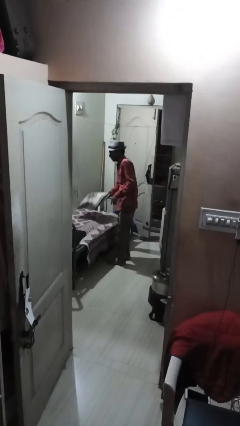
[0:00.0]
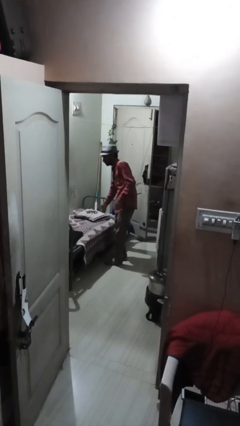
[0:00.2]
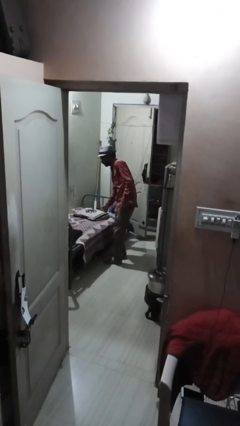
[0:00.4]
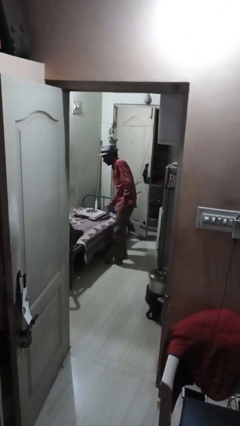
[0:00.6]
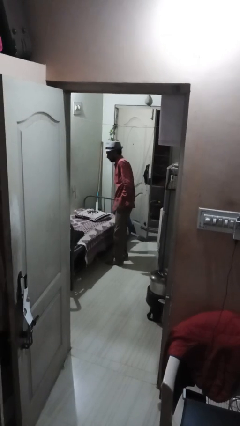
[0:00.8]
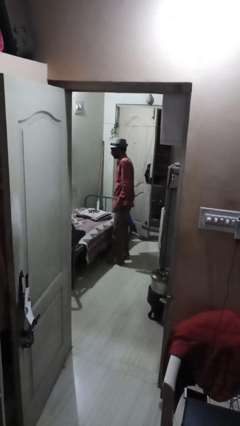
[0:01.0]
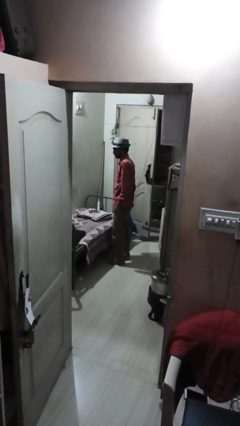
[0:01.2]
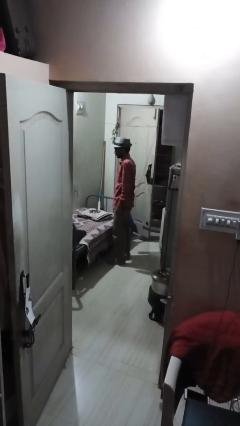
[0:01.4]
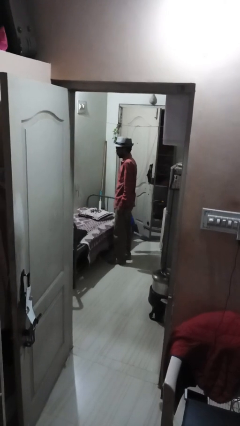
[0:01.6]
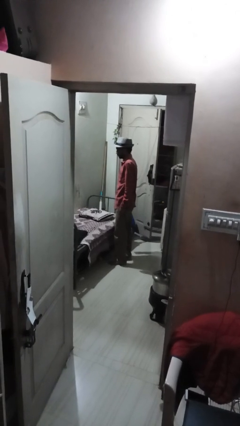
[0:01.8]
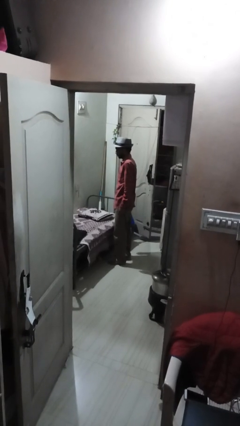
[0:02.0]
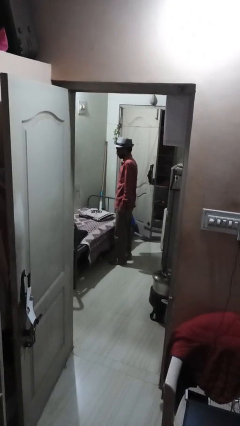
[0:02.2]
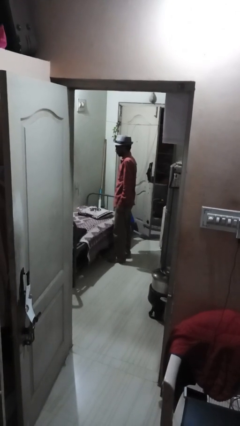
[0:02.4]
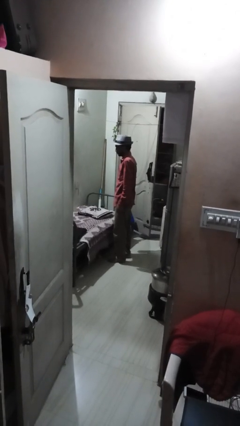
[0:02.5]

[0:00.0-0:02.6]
person puts down object on bed

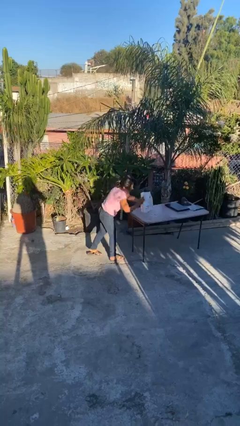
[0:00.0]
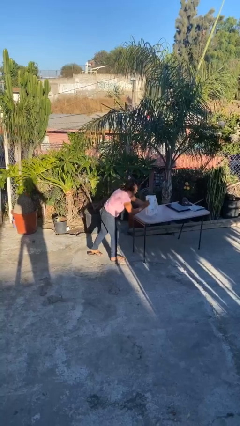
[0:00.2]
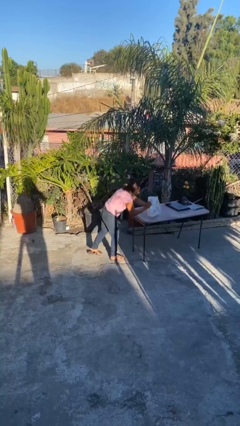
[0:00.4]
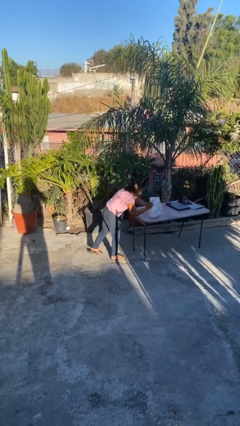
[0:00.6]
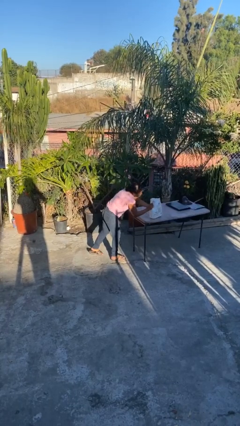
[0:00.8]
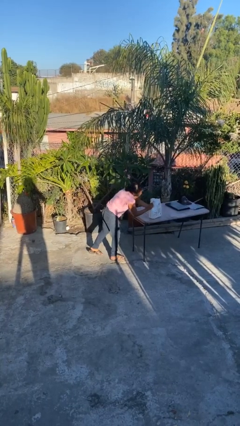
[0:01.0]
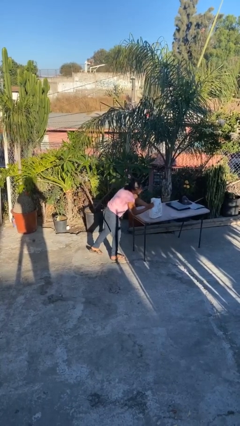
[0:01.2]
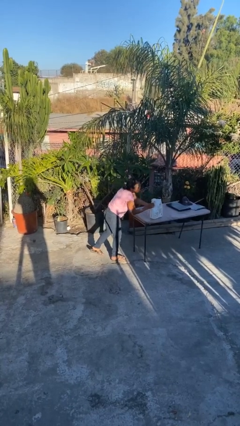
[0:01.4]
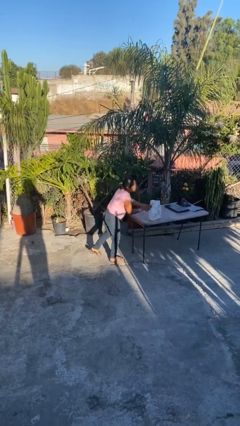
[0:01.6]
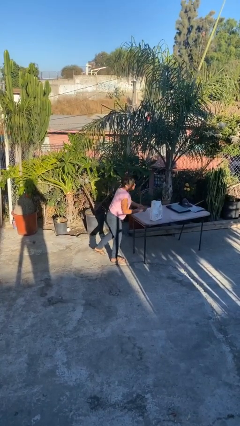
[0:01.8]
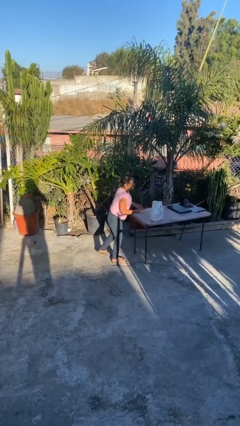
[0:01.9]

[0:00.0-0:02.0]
person puts down object on table

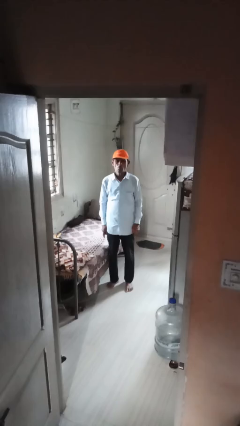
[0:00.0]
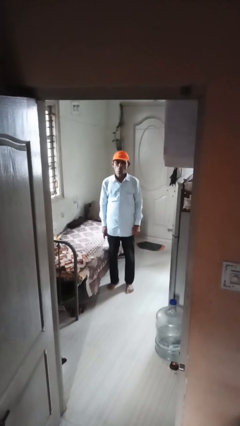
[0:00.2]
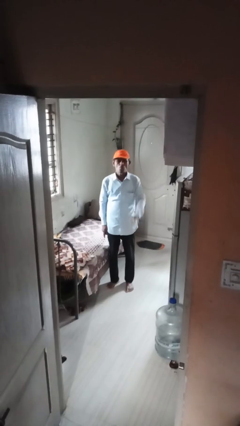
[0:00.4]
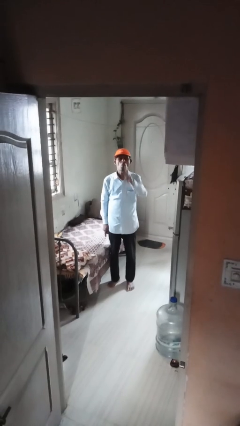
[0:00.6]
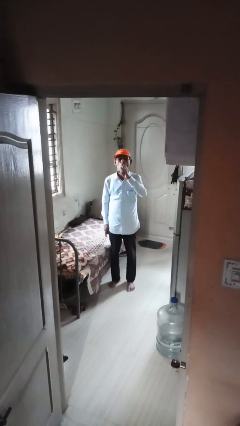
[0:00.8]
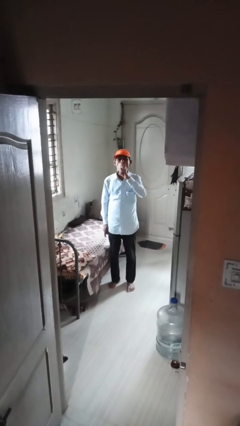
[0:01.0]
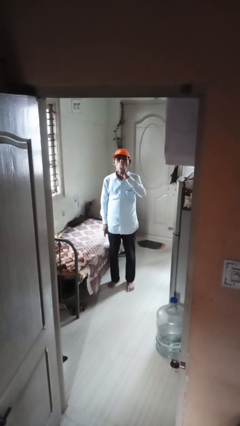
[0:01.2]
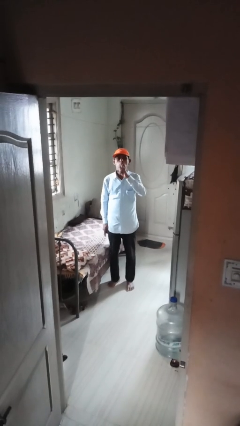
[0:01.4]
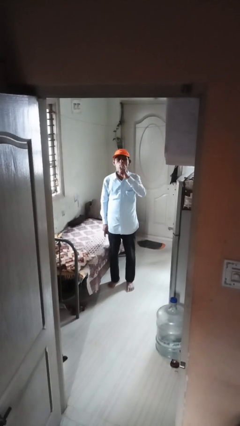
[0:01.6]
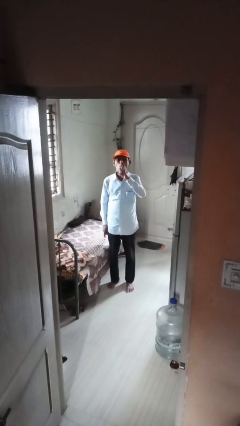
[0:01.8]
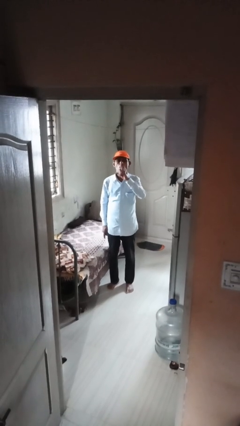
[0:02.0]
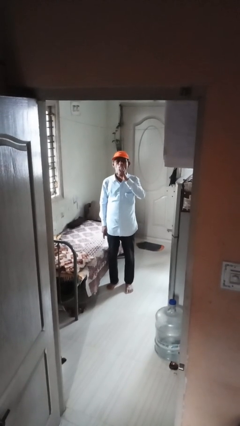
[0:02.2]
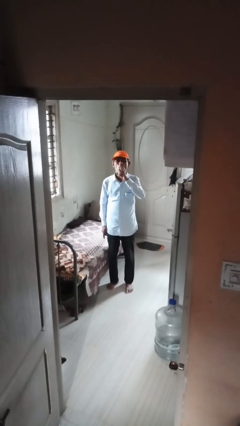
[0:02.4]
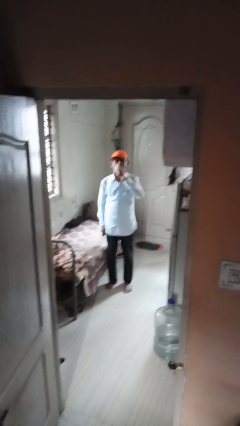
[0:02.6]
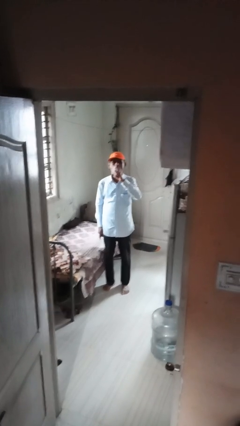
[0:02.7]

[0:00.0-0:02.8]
person gestures be quiet

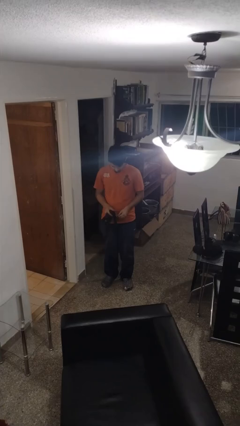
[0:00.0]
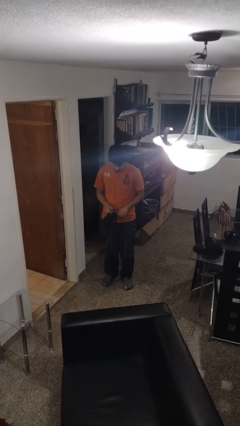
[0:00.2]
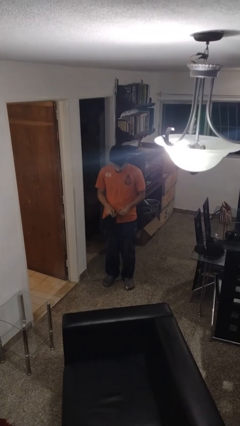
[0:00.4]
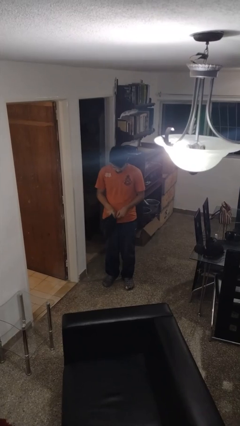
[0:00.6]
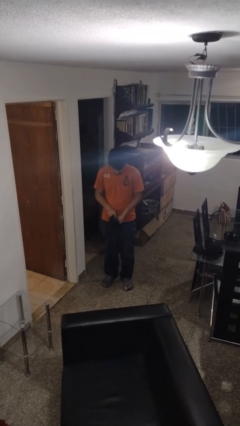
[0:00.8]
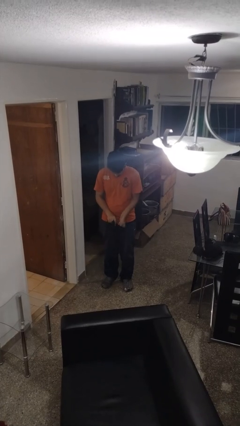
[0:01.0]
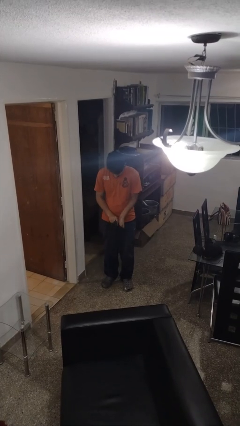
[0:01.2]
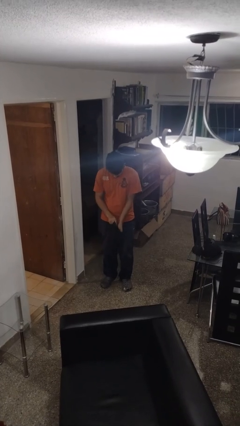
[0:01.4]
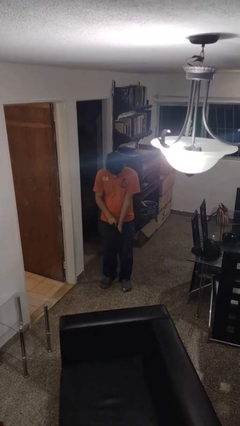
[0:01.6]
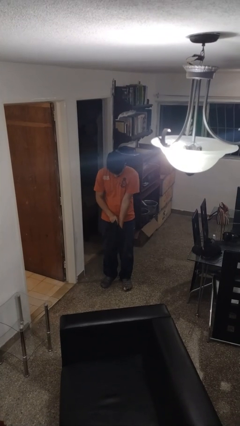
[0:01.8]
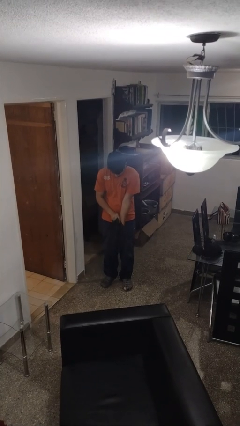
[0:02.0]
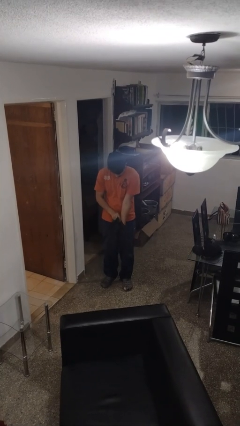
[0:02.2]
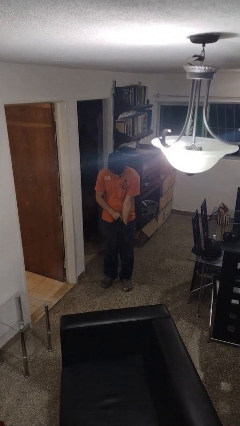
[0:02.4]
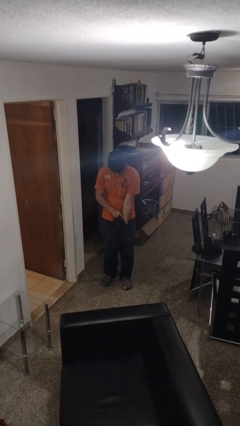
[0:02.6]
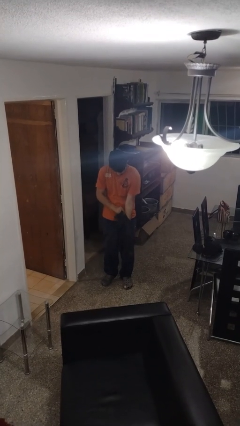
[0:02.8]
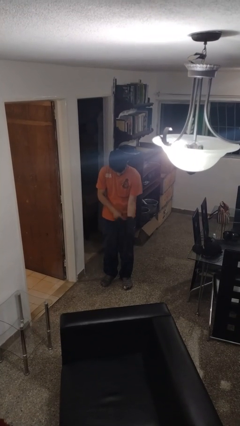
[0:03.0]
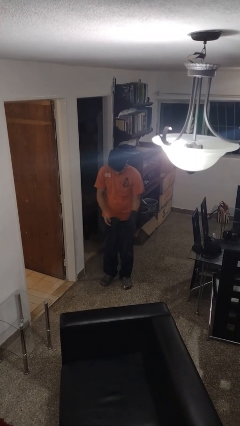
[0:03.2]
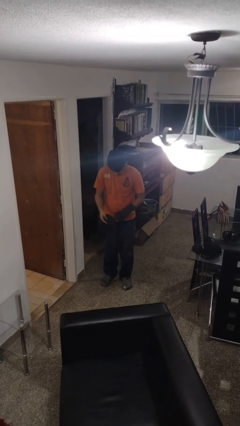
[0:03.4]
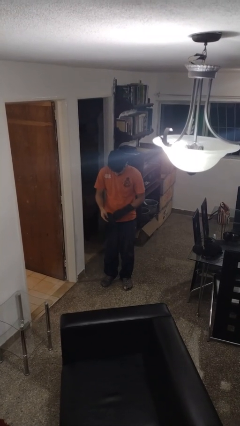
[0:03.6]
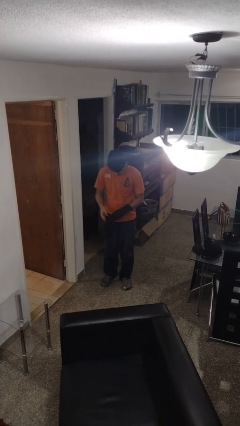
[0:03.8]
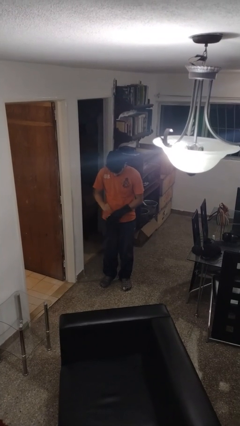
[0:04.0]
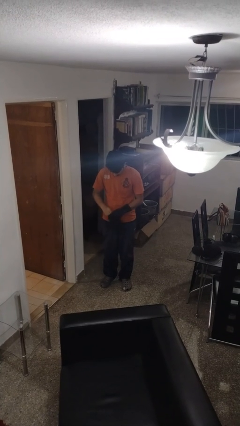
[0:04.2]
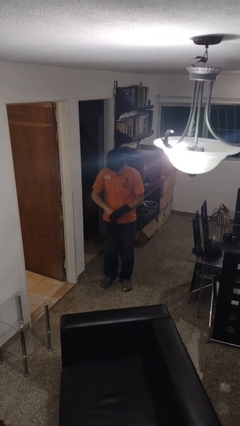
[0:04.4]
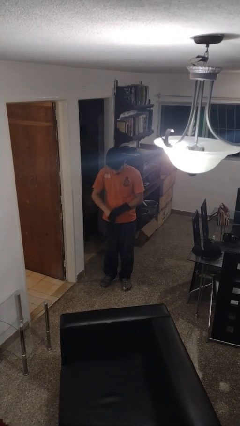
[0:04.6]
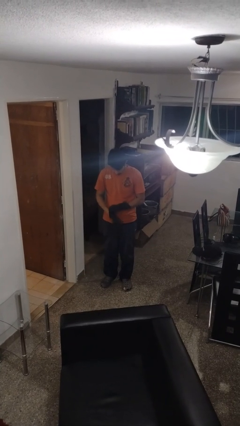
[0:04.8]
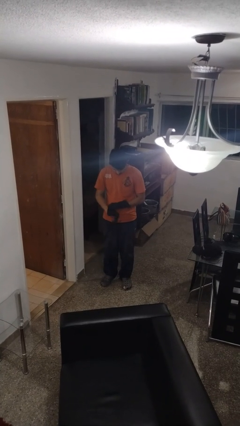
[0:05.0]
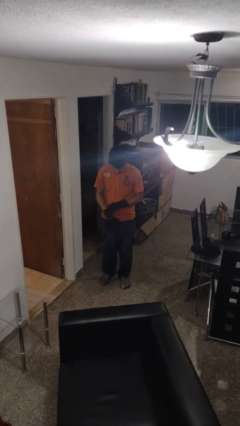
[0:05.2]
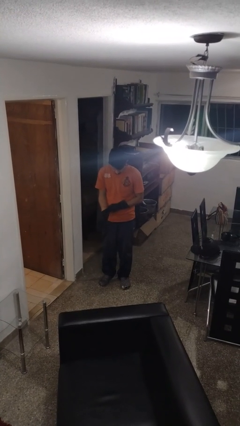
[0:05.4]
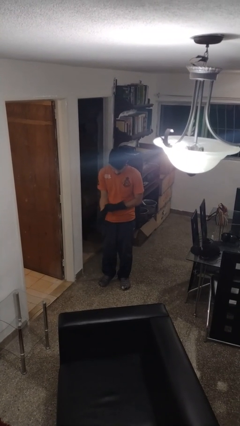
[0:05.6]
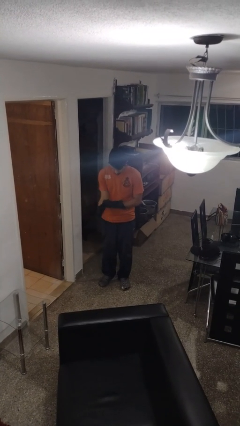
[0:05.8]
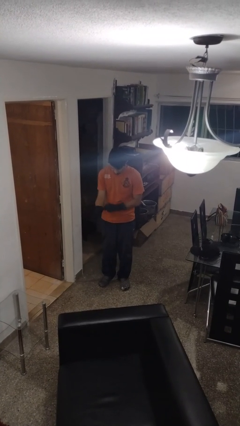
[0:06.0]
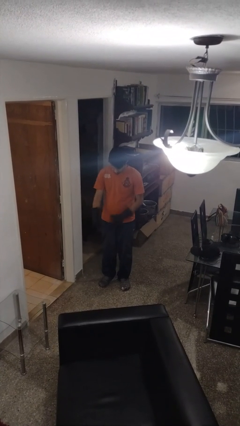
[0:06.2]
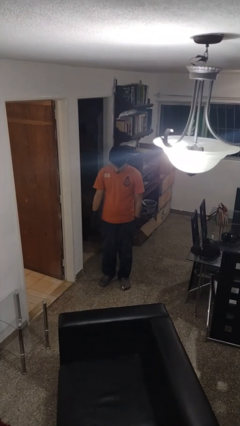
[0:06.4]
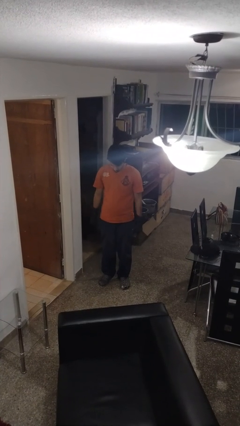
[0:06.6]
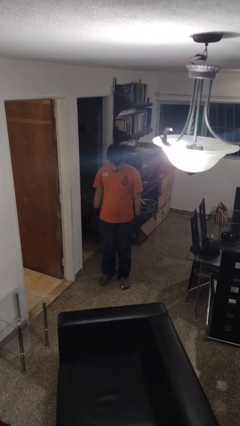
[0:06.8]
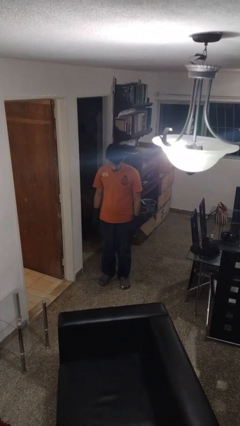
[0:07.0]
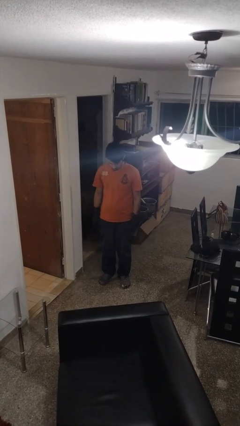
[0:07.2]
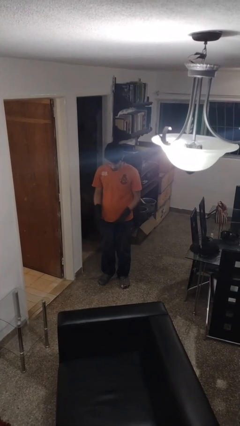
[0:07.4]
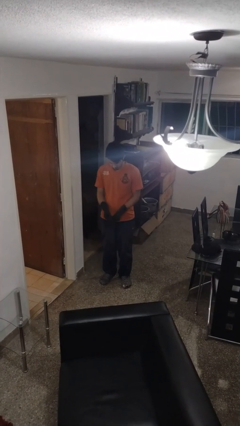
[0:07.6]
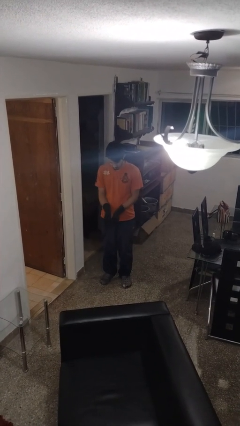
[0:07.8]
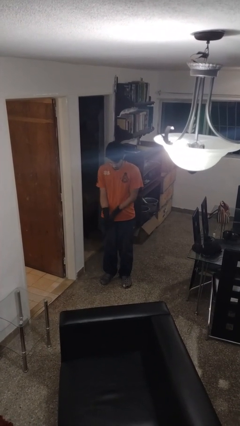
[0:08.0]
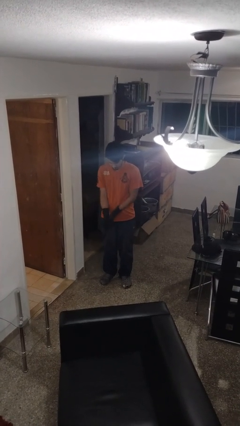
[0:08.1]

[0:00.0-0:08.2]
person puts on gloves

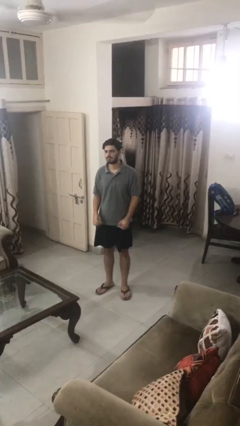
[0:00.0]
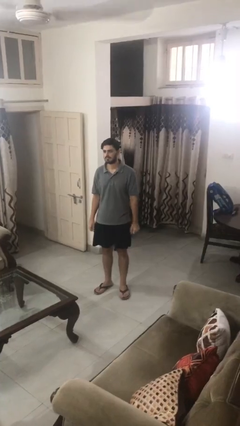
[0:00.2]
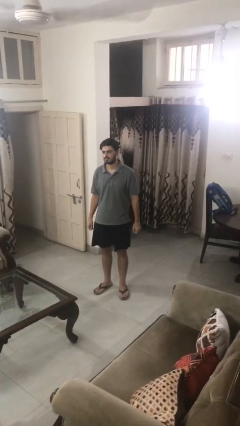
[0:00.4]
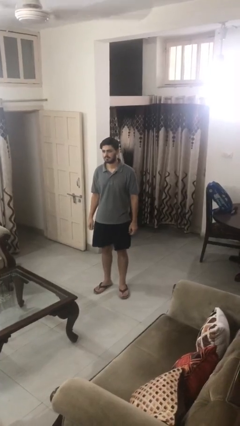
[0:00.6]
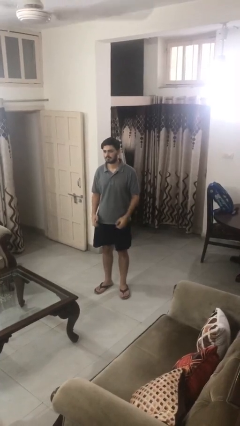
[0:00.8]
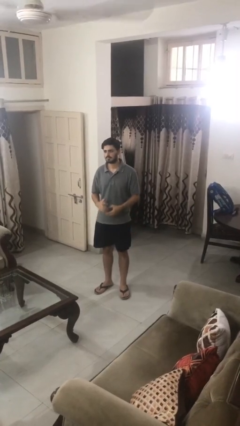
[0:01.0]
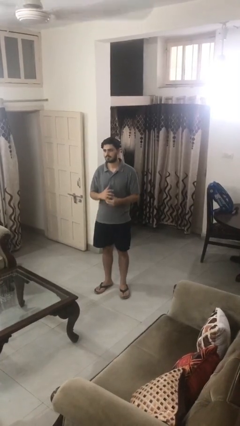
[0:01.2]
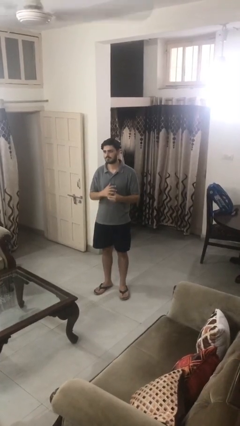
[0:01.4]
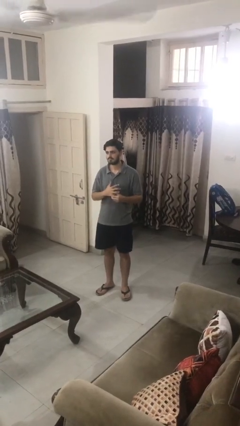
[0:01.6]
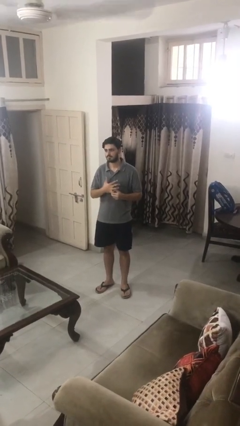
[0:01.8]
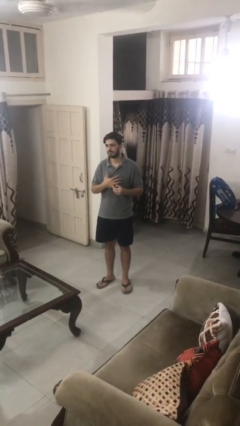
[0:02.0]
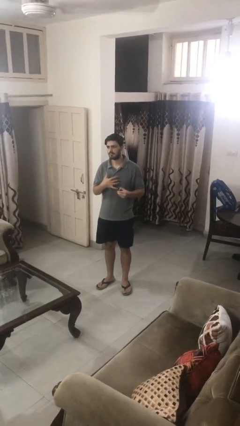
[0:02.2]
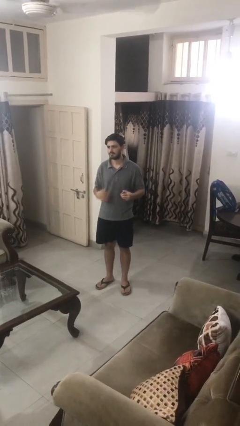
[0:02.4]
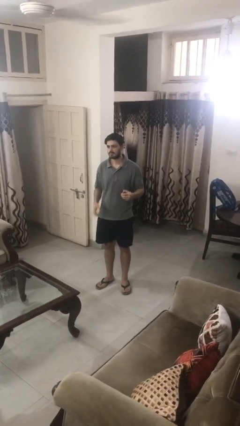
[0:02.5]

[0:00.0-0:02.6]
person takes off ring
